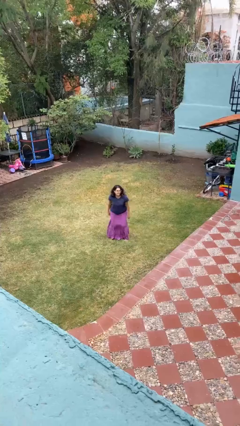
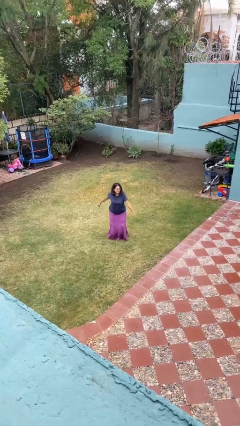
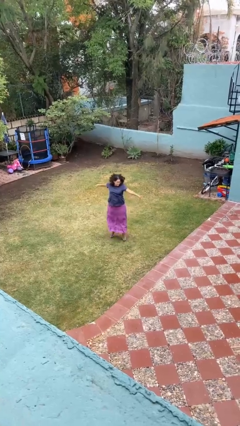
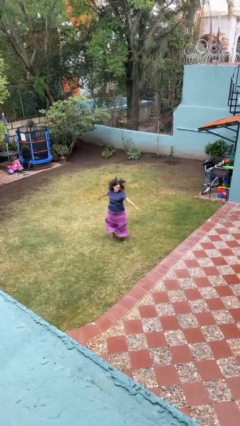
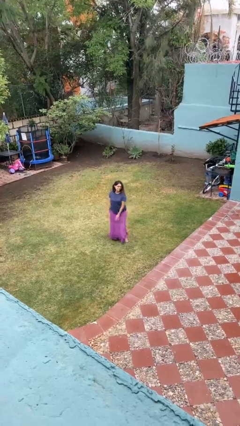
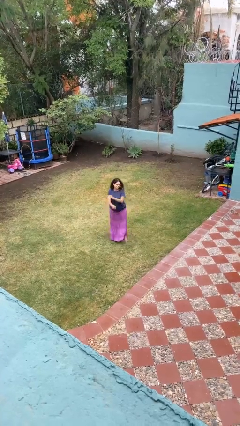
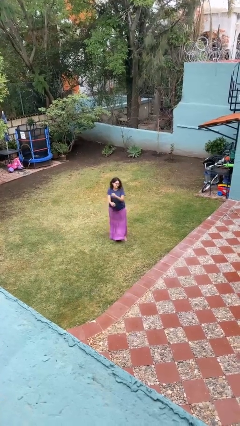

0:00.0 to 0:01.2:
person jumps

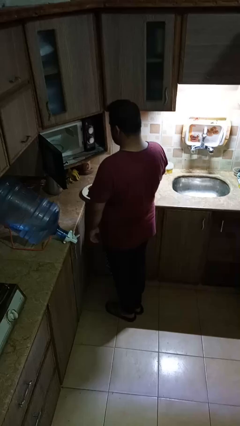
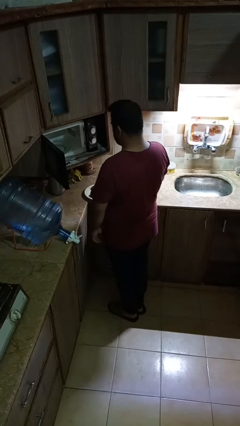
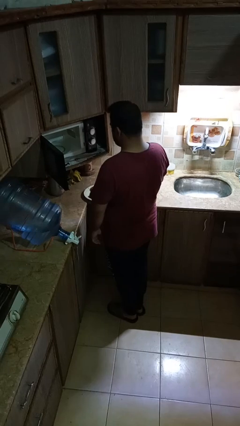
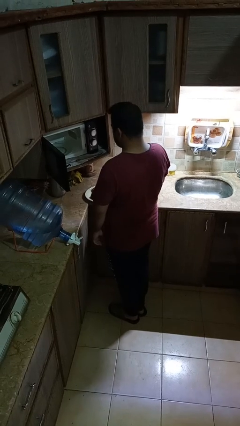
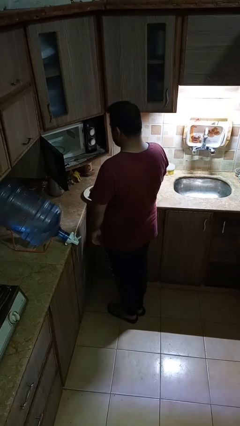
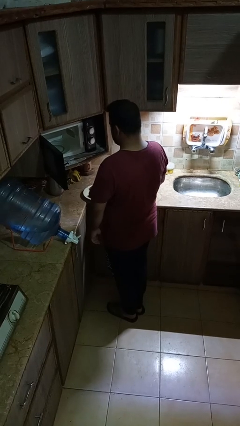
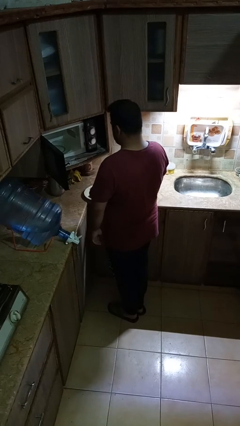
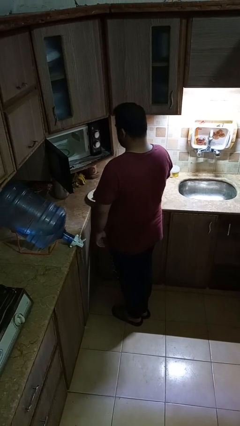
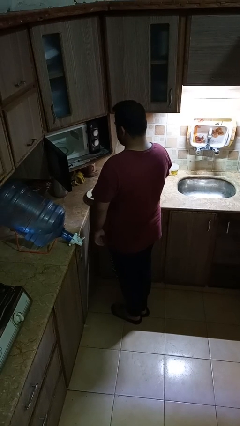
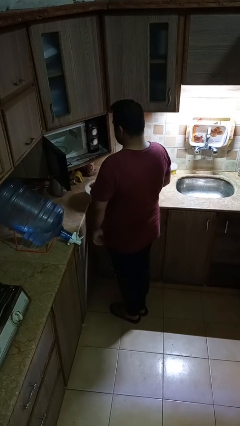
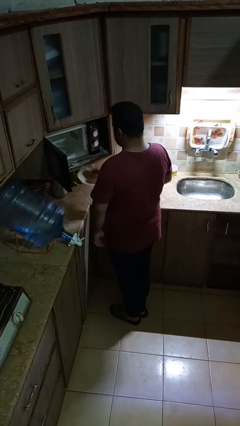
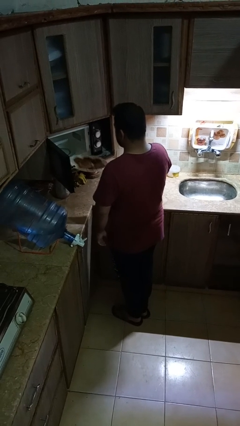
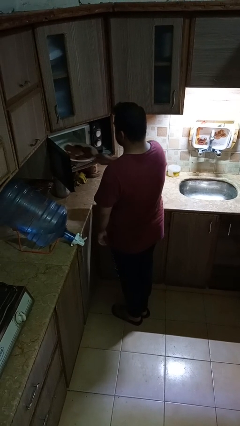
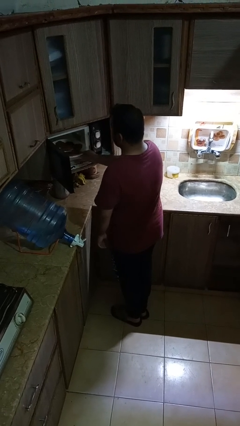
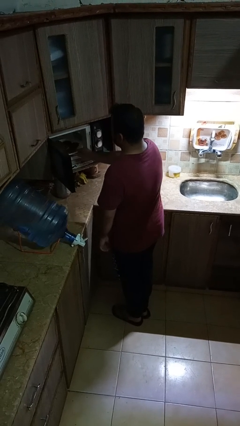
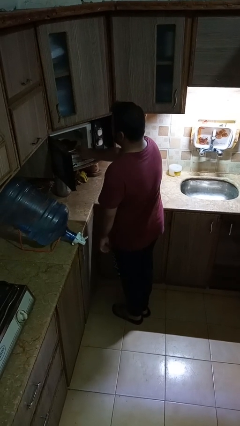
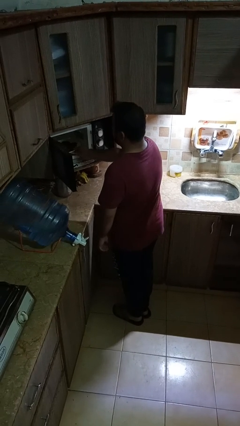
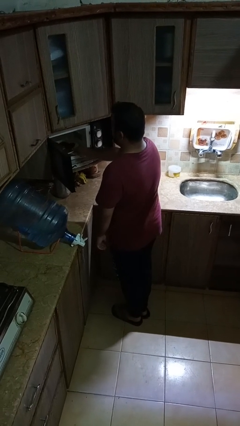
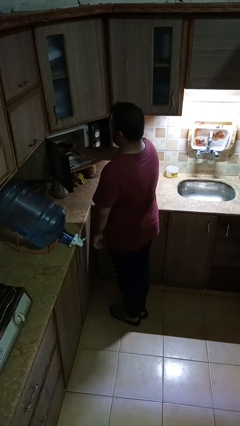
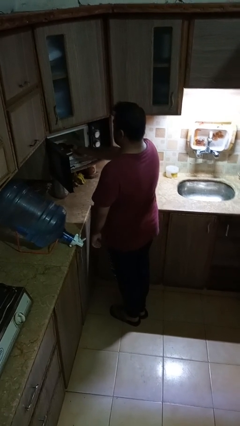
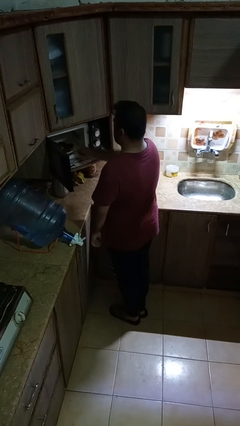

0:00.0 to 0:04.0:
person puts object into microwave

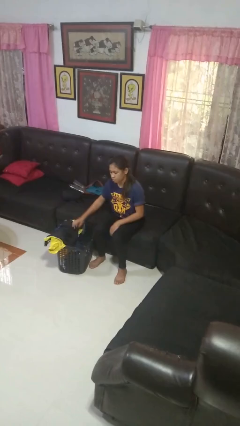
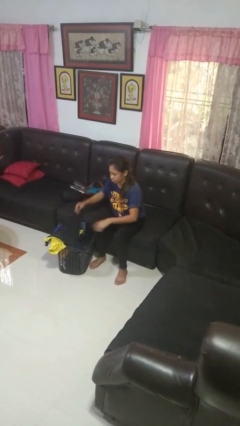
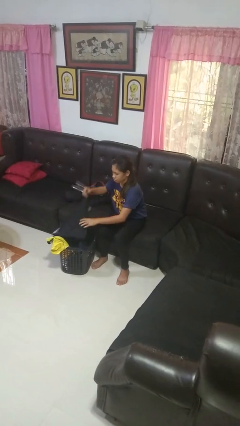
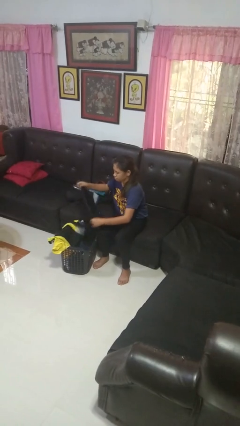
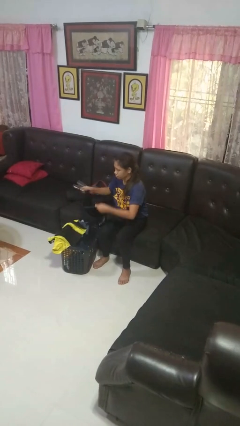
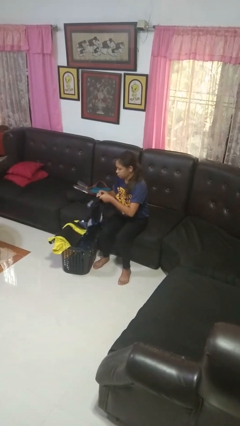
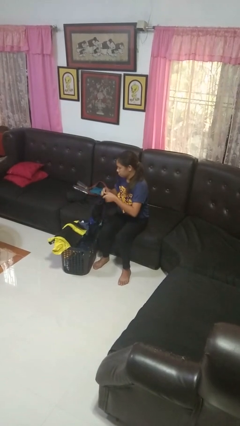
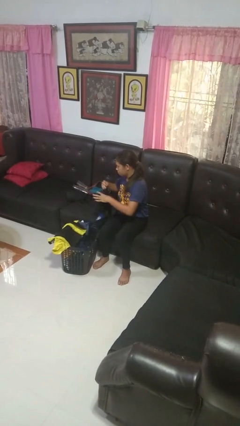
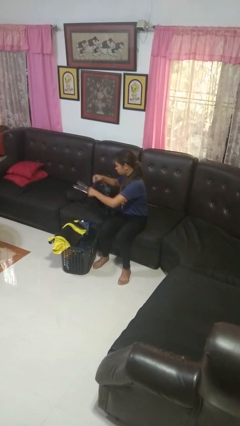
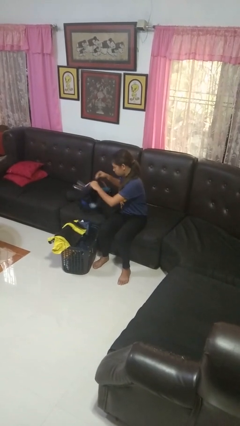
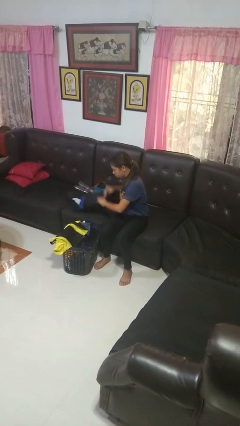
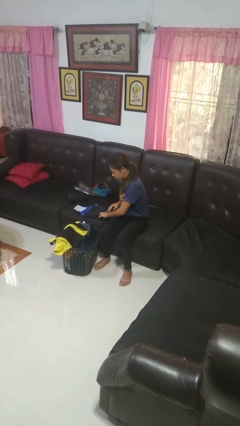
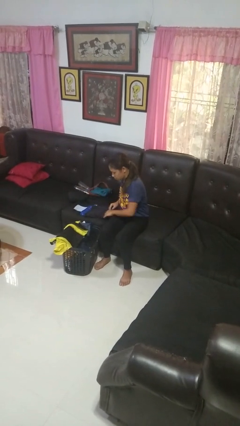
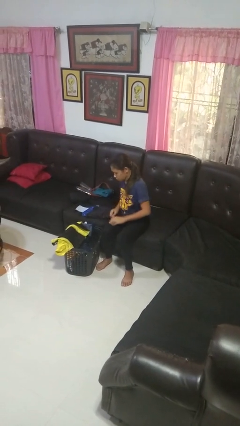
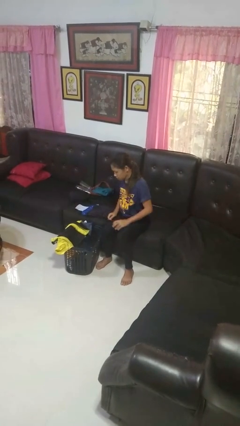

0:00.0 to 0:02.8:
person folds shirt

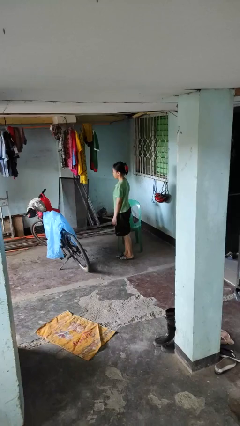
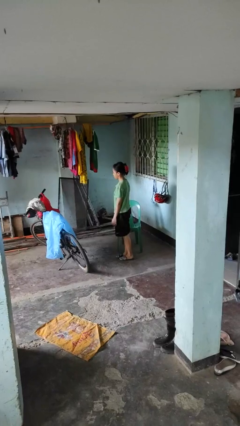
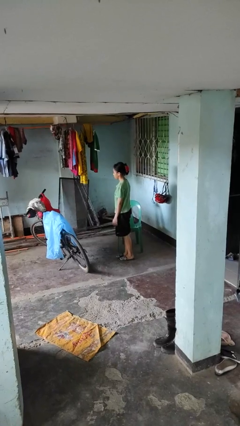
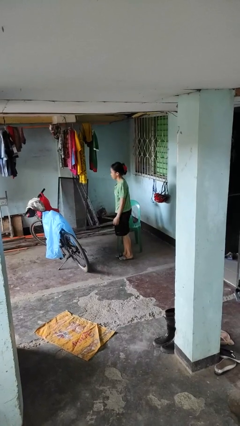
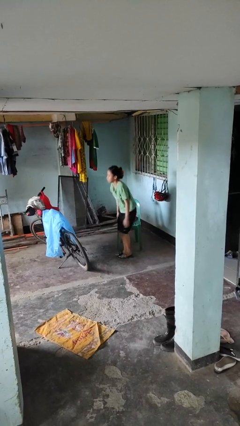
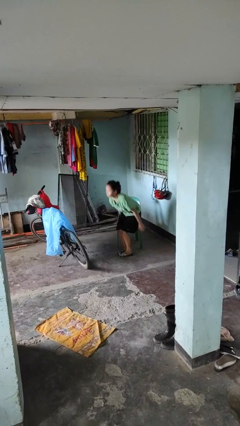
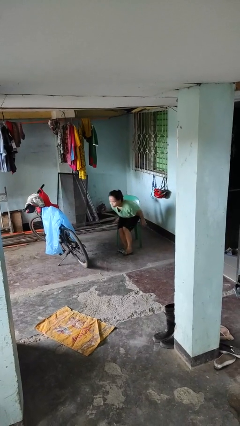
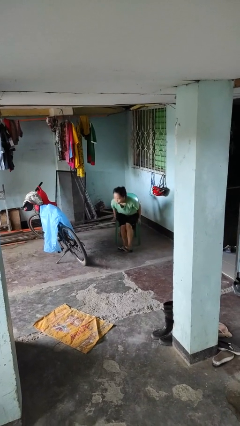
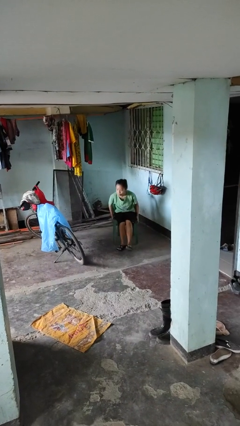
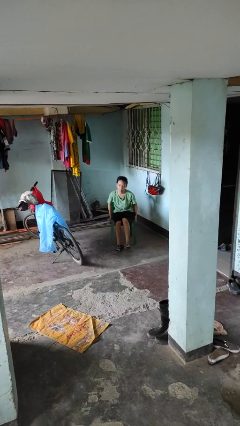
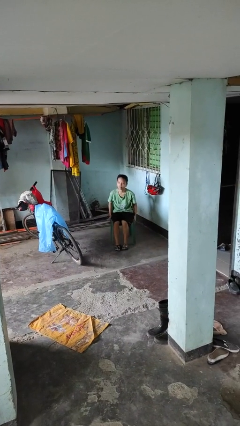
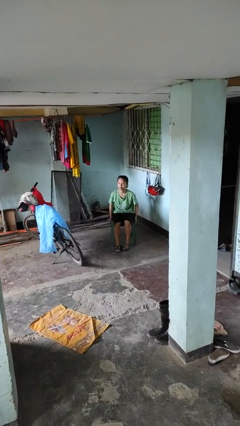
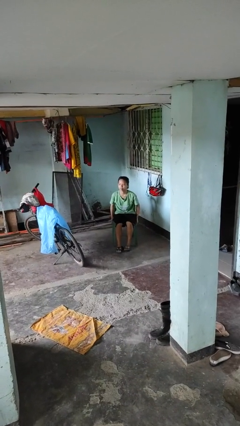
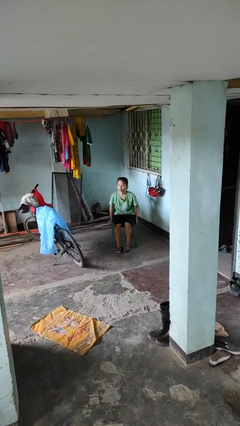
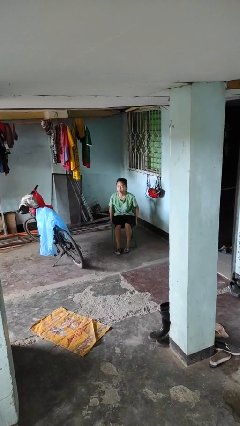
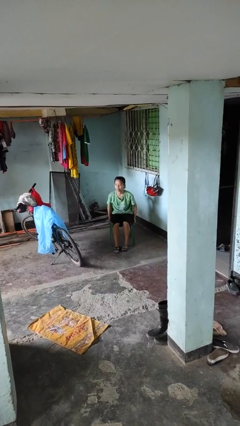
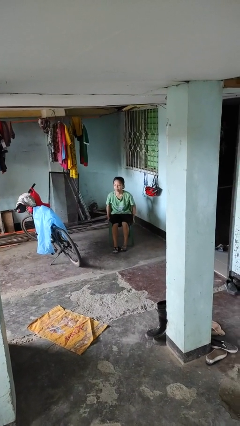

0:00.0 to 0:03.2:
person sits down

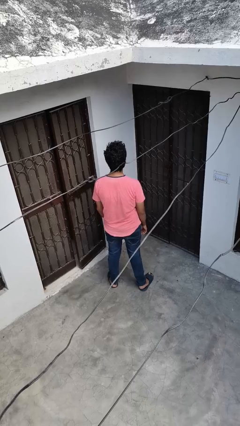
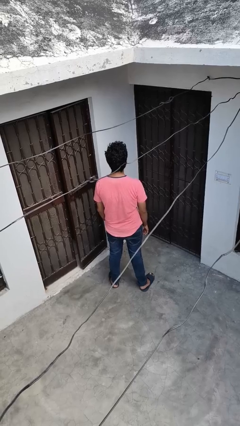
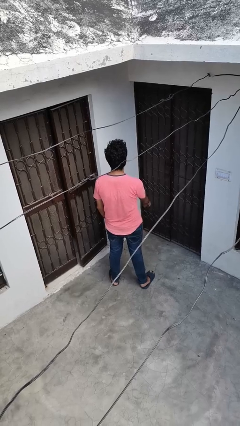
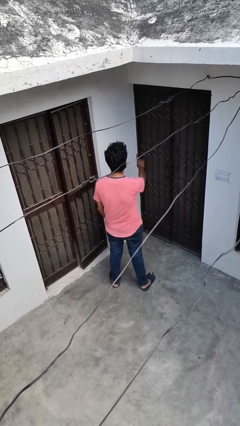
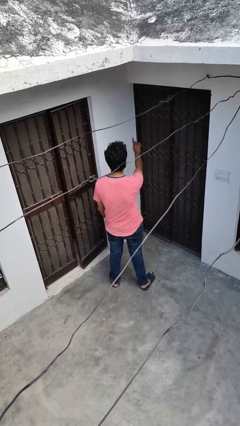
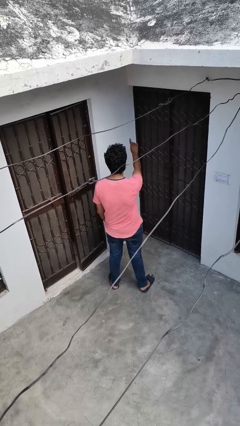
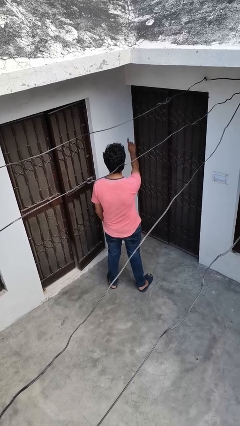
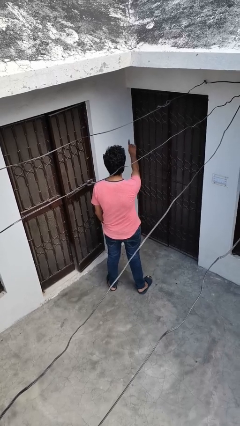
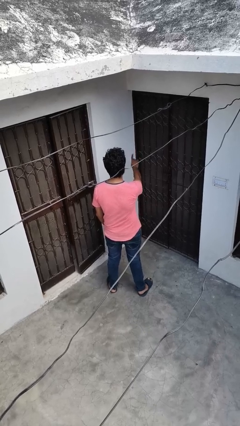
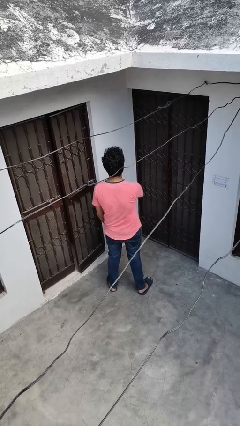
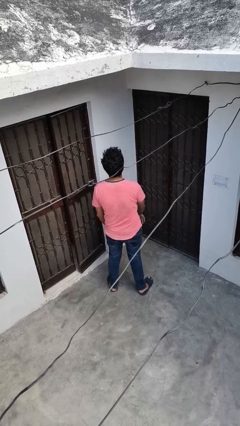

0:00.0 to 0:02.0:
person gestures number one

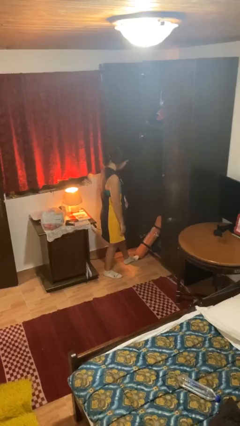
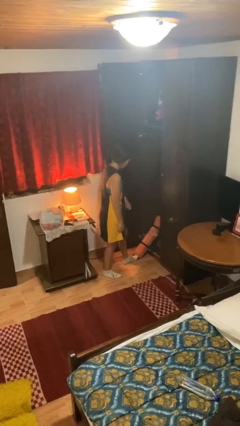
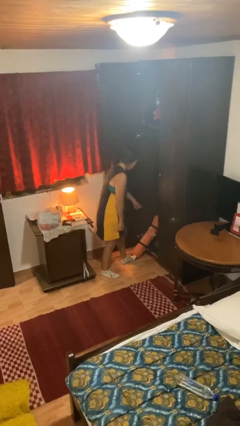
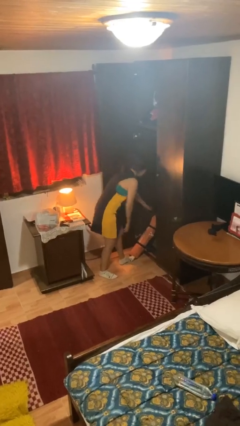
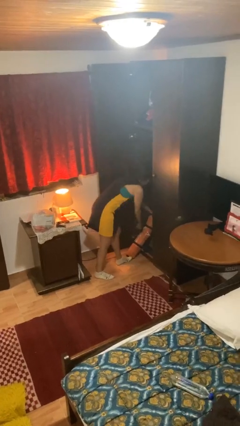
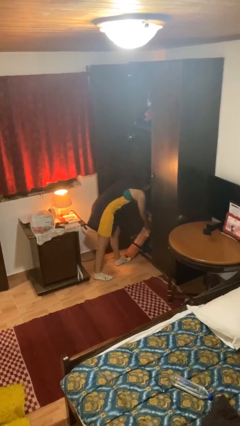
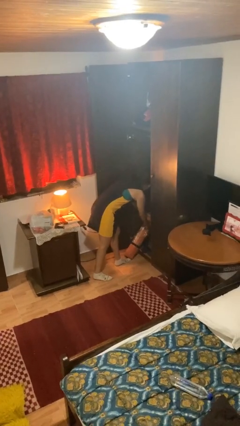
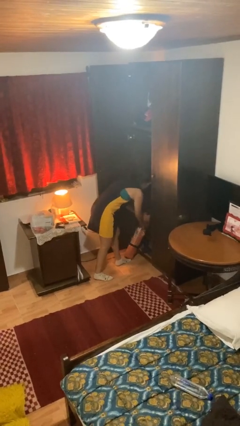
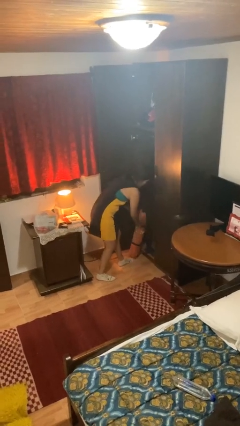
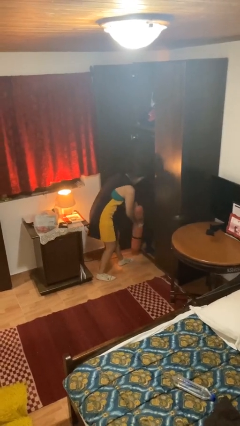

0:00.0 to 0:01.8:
person picks up object from cabinet

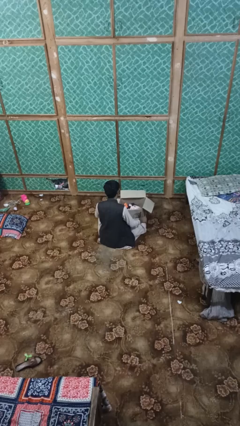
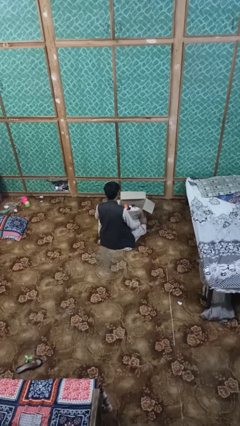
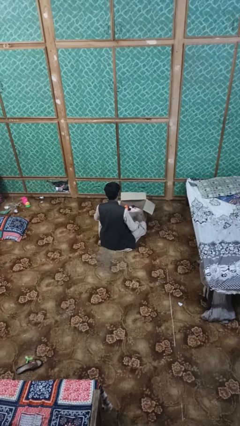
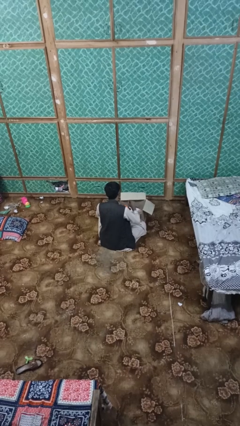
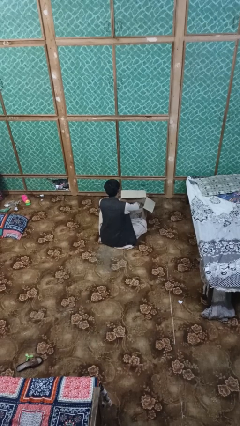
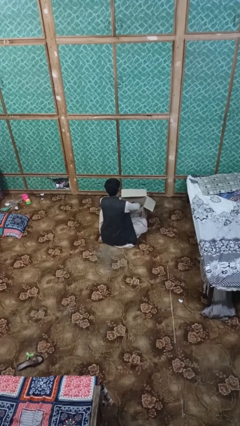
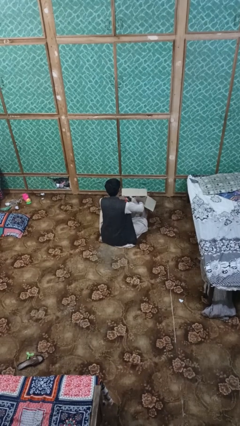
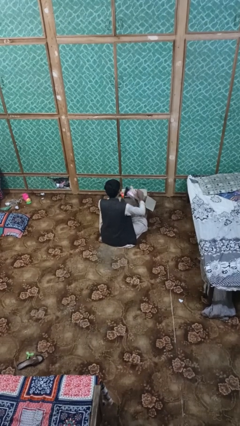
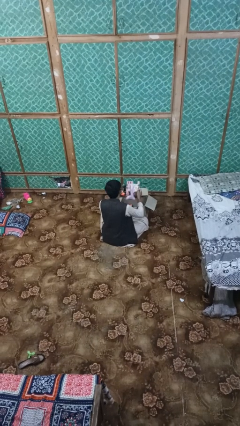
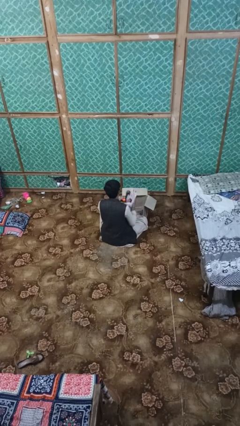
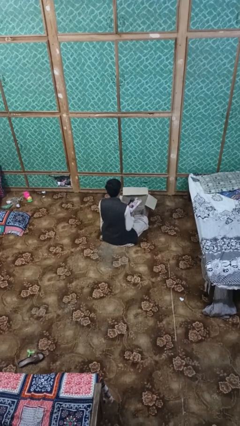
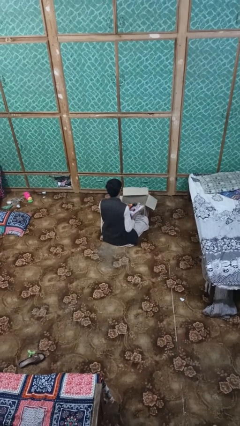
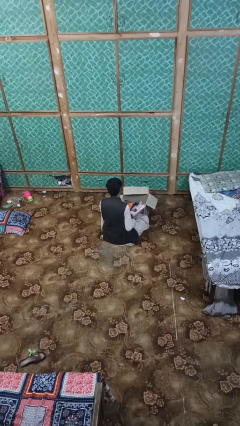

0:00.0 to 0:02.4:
person takes object from box
